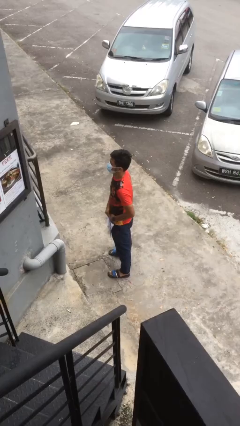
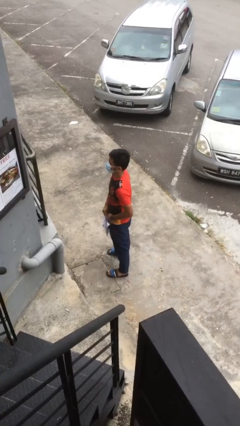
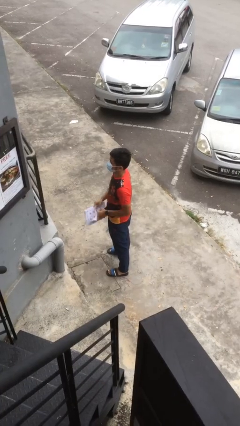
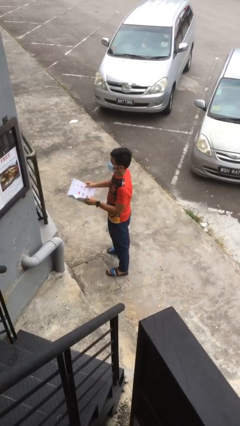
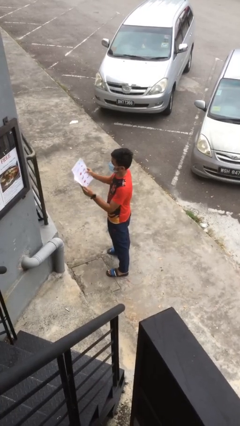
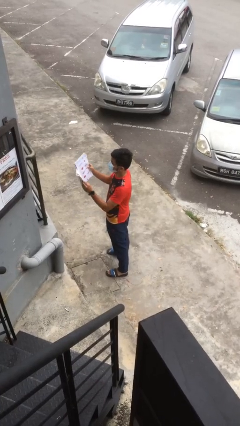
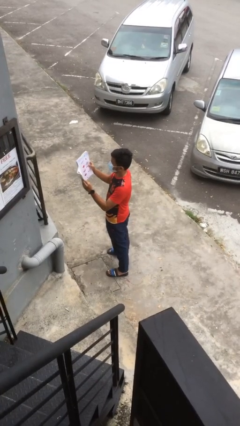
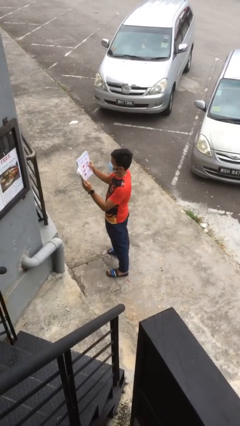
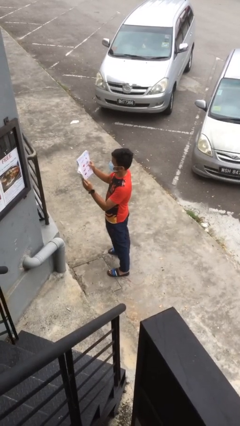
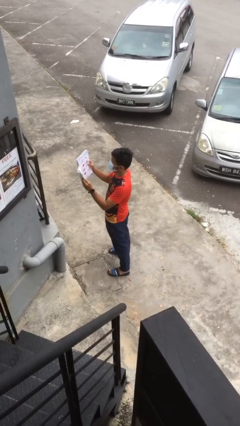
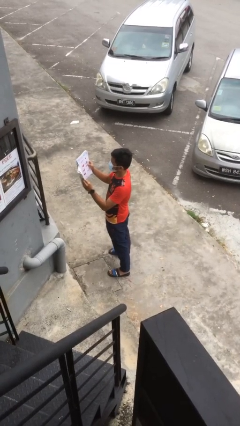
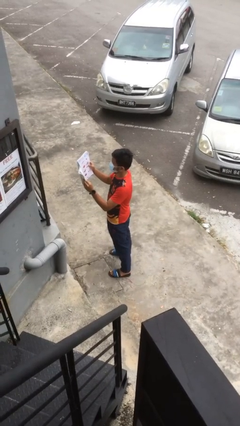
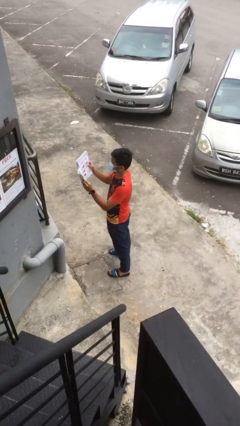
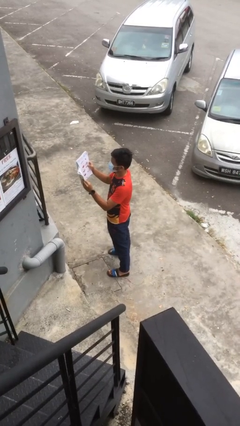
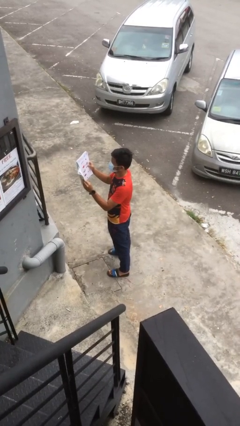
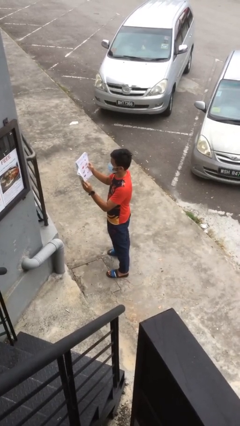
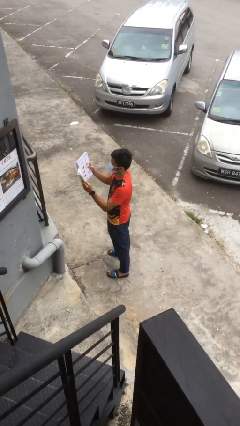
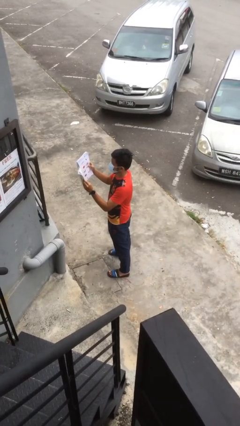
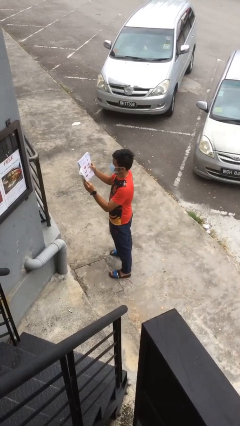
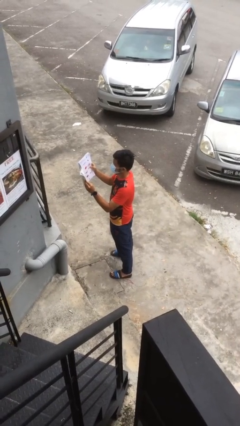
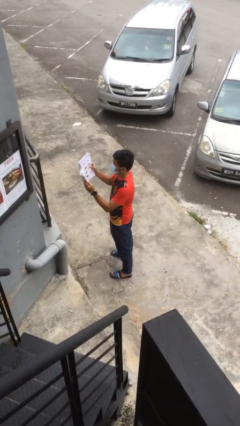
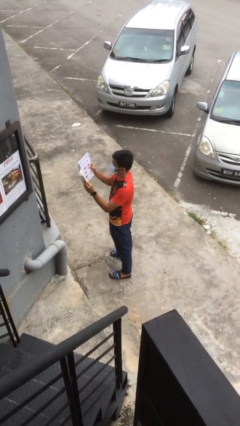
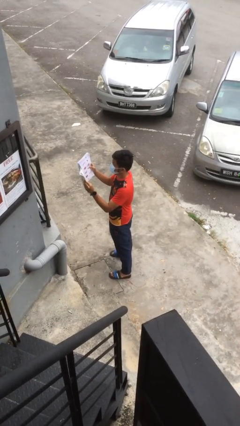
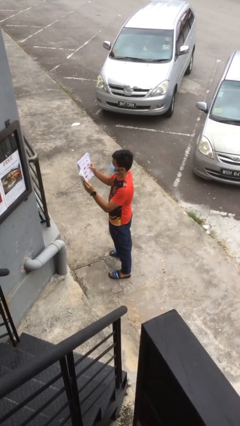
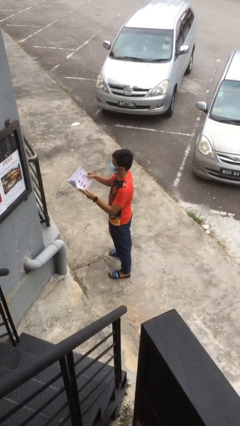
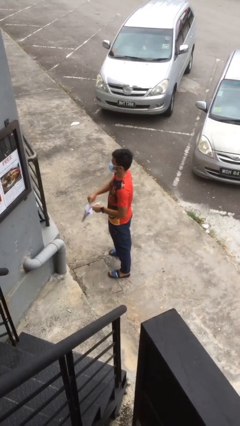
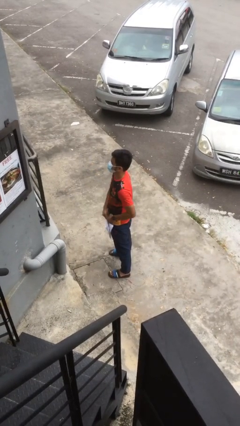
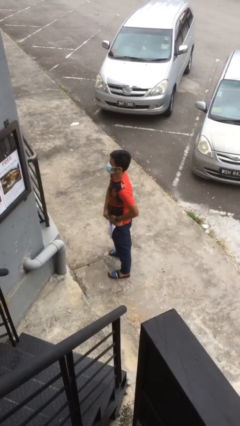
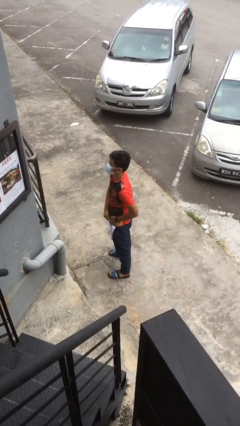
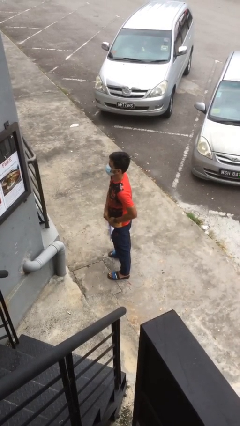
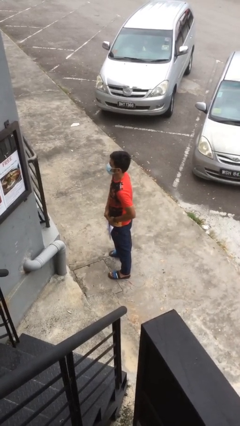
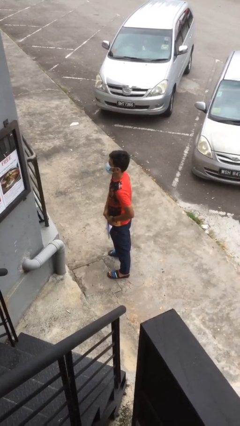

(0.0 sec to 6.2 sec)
person reads document

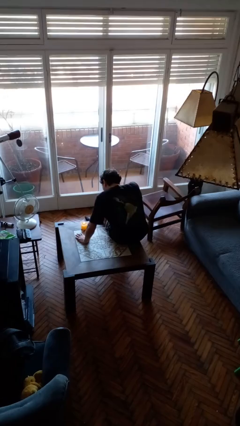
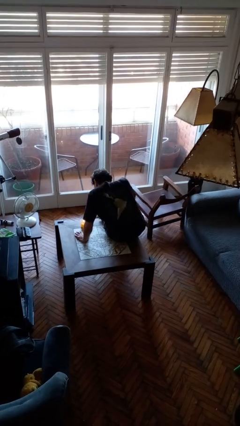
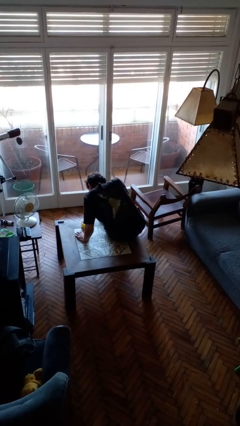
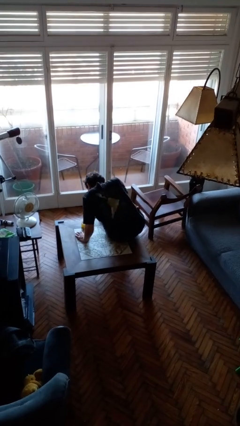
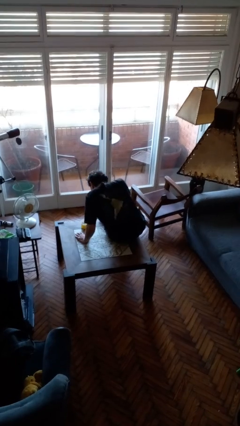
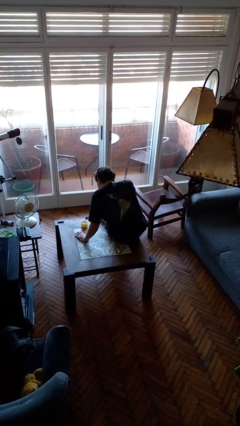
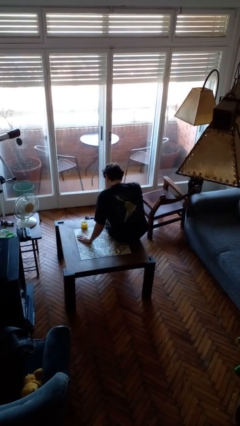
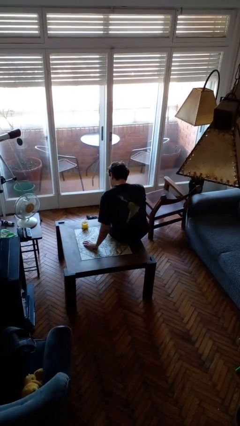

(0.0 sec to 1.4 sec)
person extinguishes candle

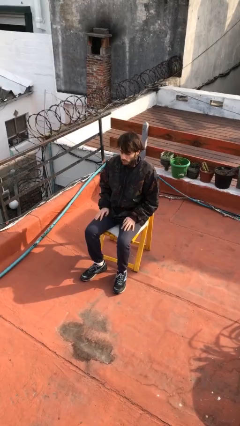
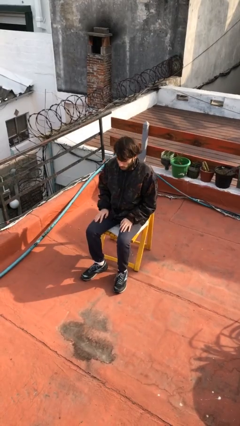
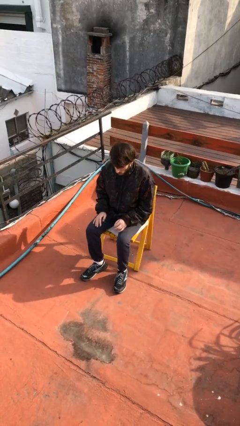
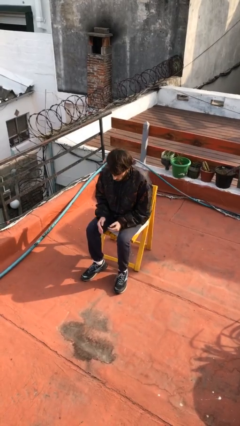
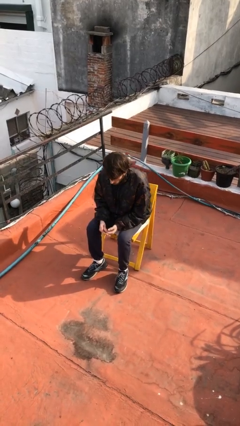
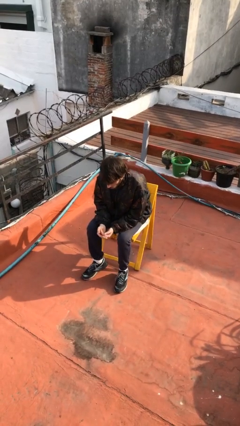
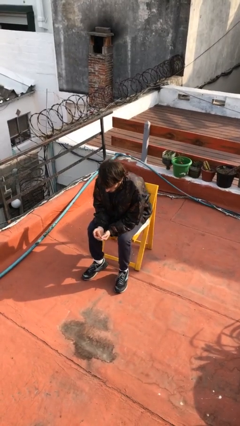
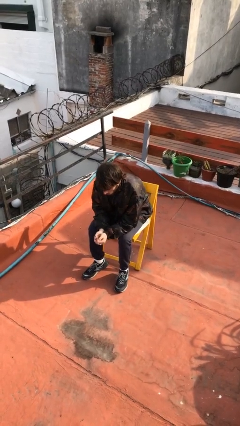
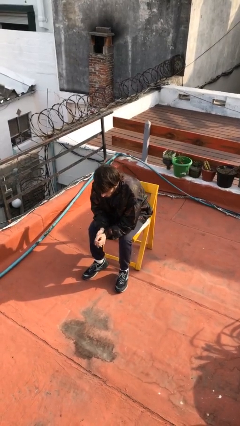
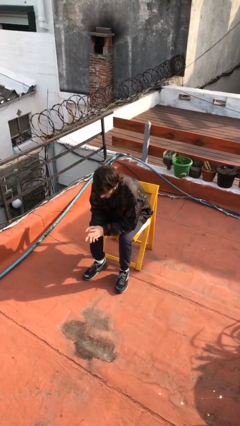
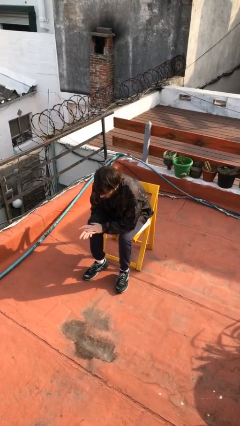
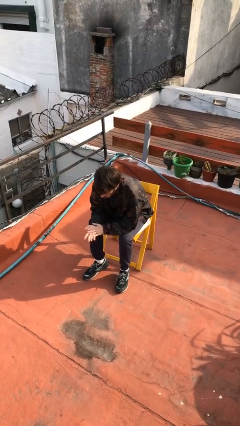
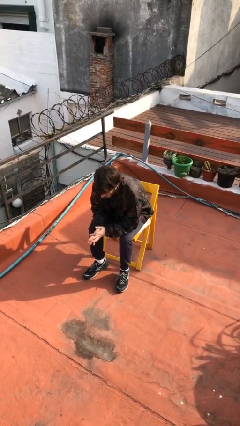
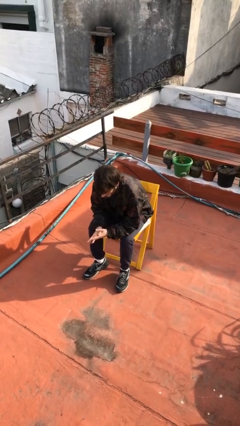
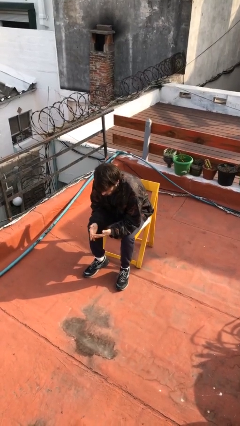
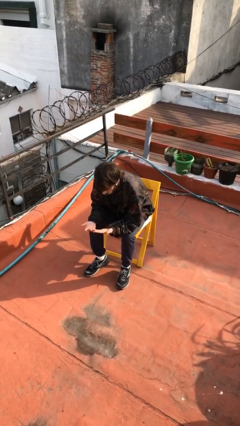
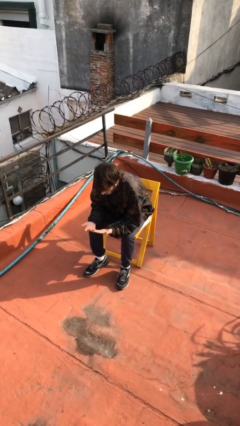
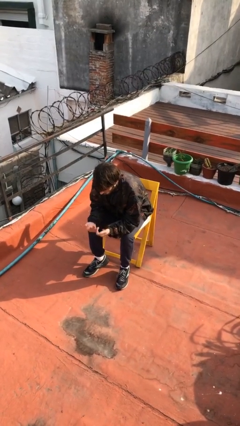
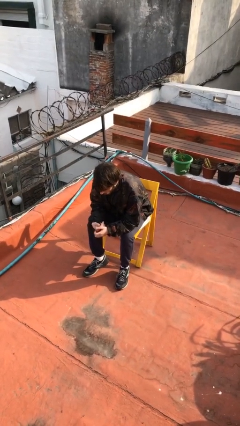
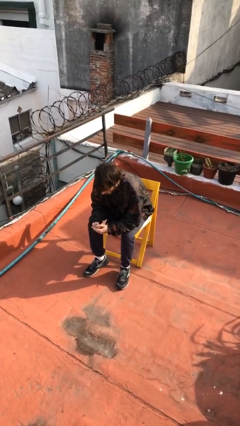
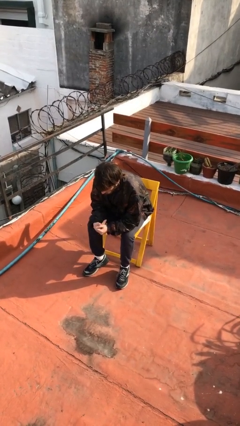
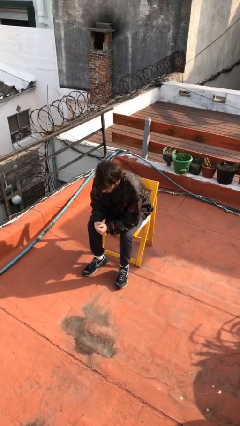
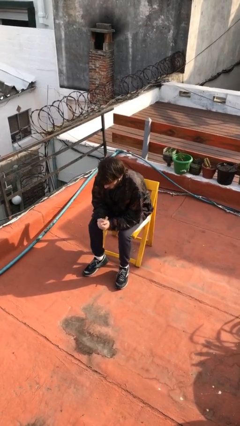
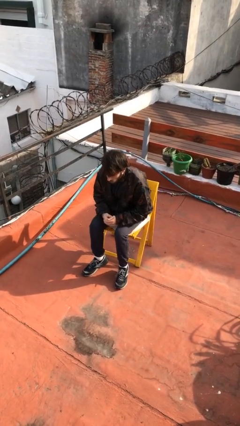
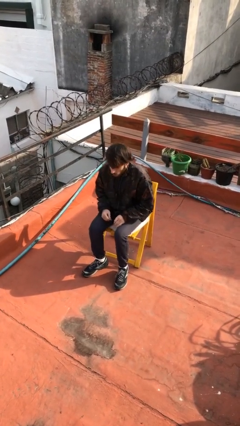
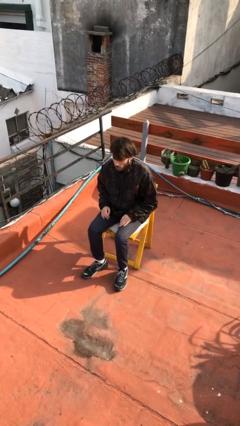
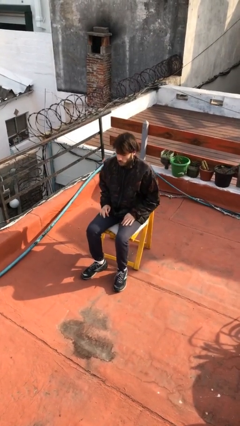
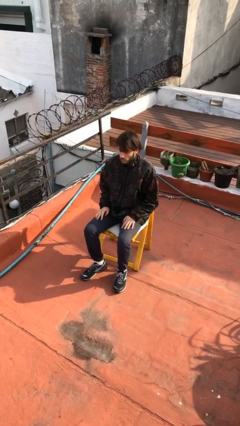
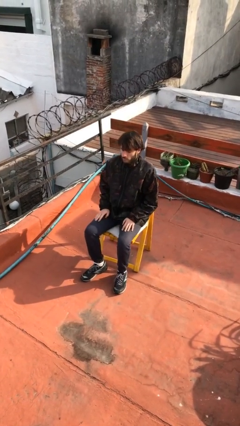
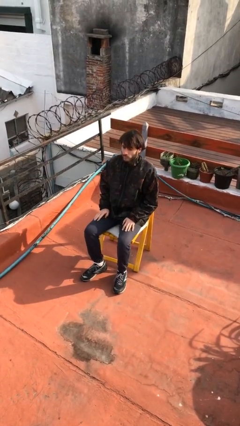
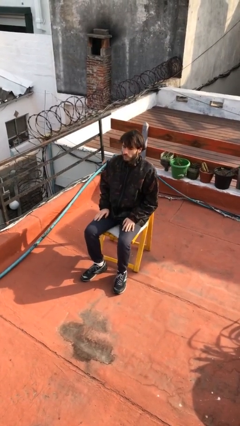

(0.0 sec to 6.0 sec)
person looks at hands in lap

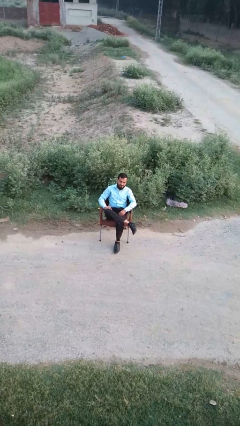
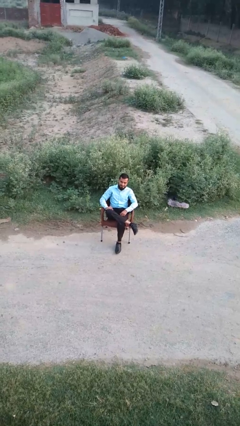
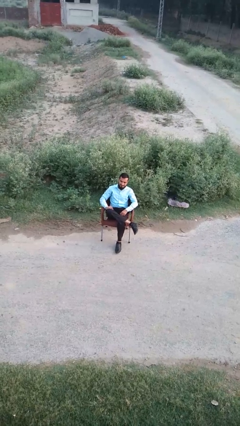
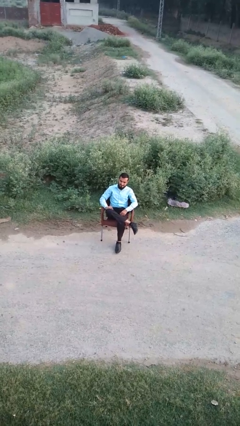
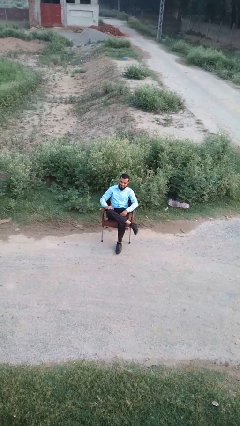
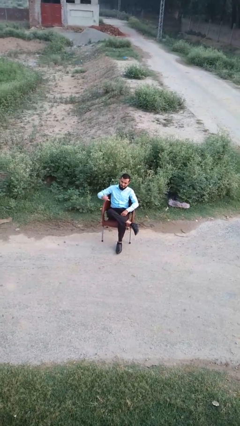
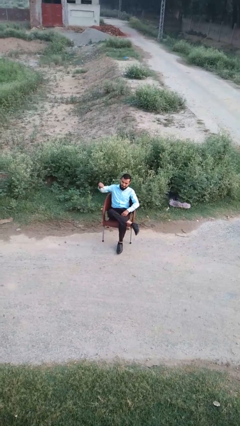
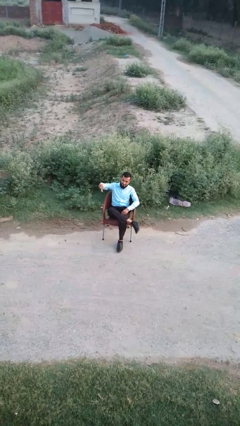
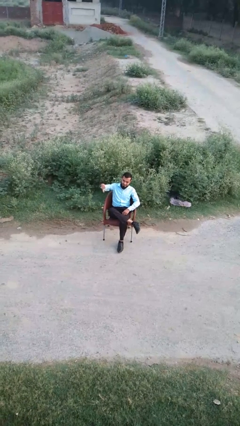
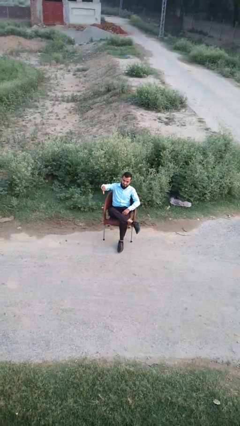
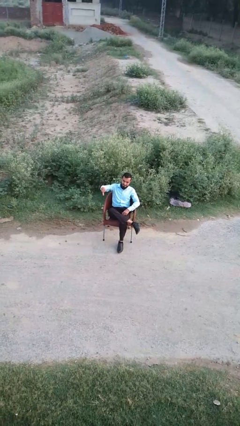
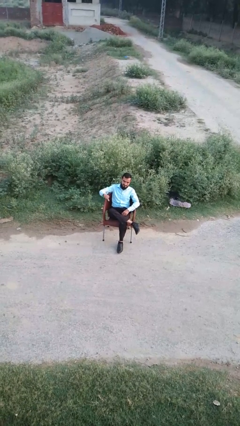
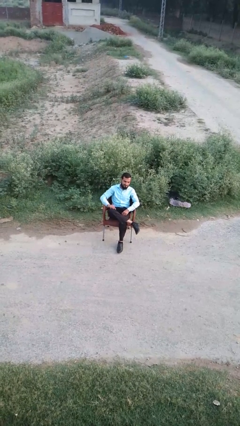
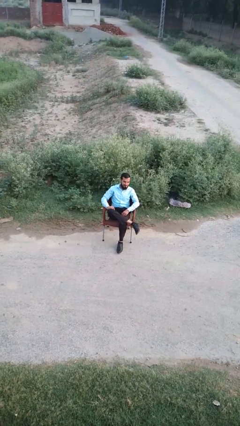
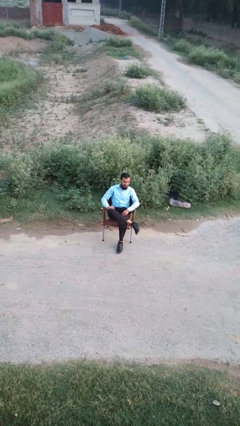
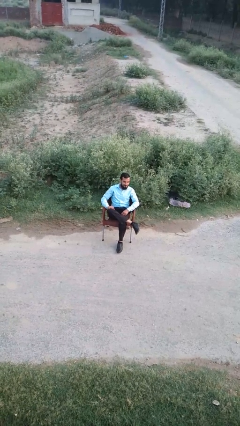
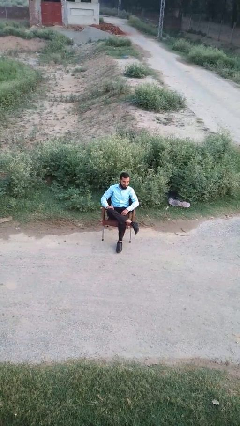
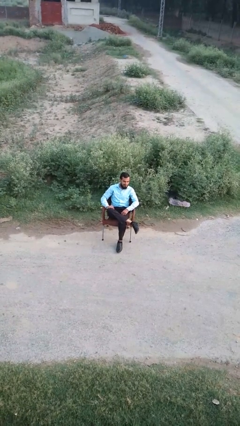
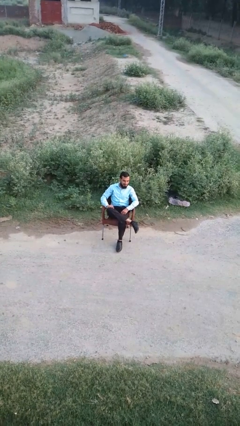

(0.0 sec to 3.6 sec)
person gestures thumbs down

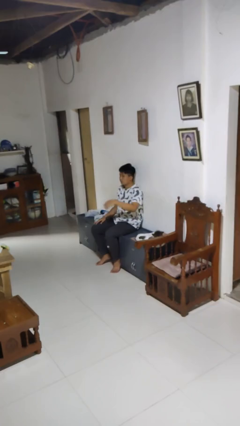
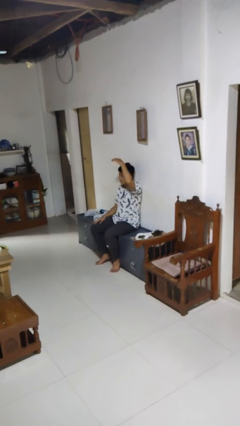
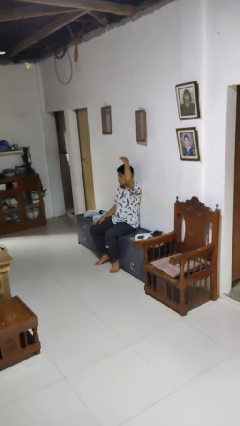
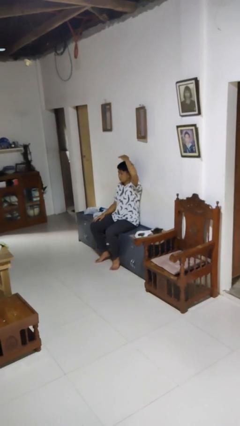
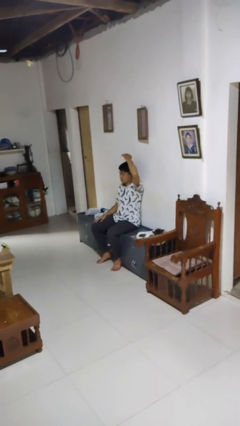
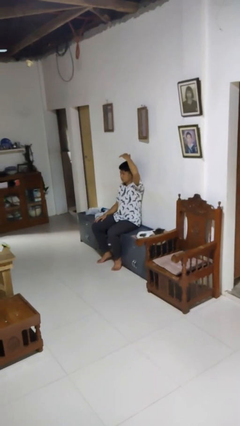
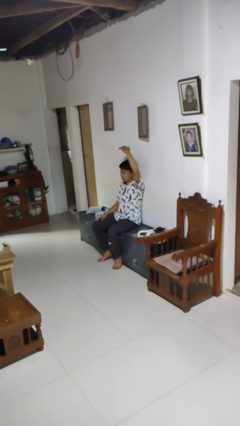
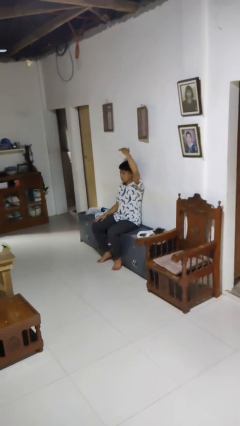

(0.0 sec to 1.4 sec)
person pats head
